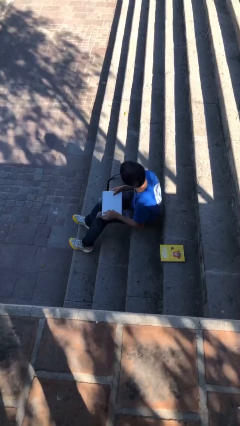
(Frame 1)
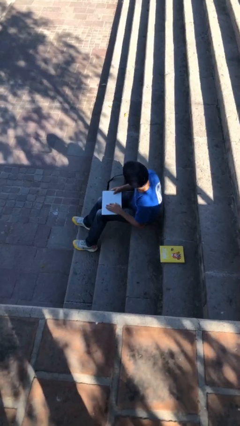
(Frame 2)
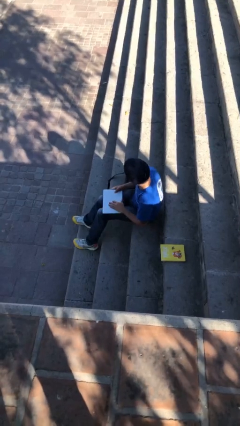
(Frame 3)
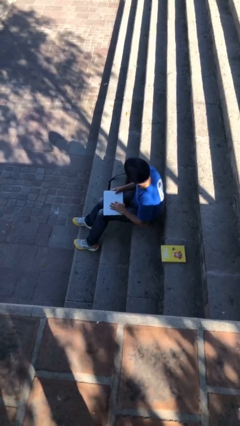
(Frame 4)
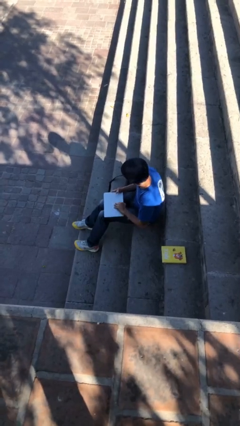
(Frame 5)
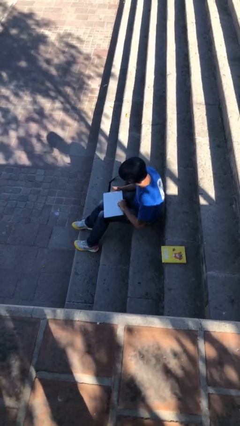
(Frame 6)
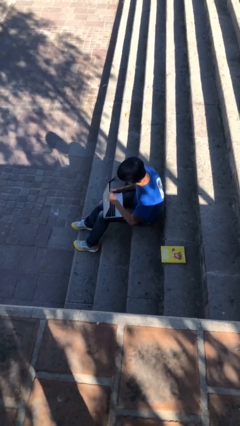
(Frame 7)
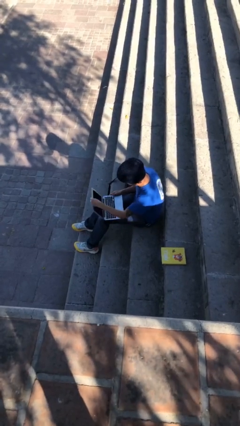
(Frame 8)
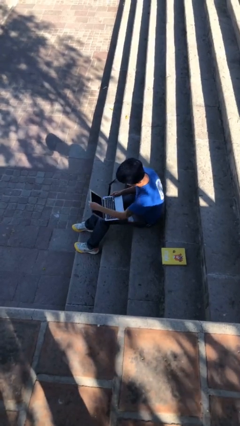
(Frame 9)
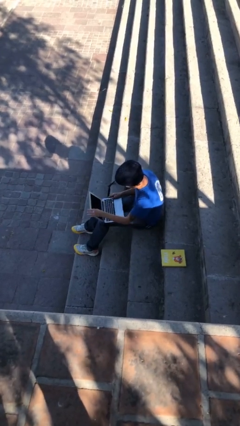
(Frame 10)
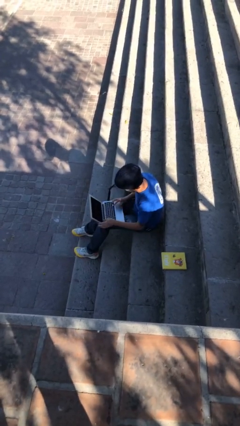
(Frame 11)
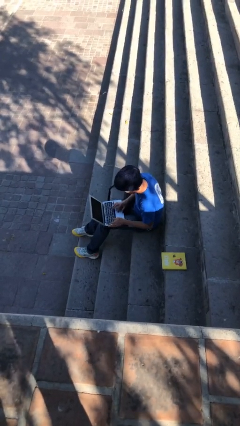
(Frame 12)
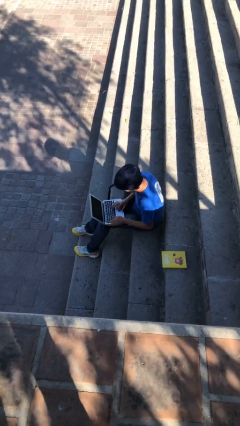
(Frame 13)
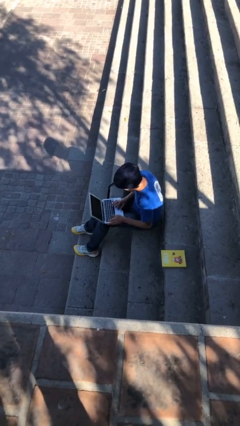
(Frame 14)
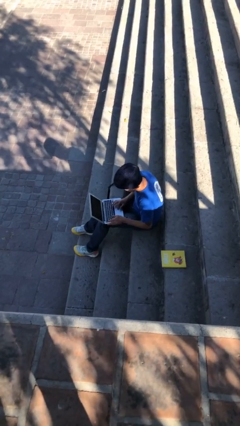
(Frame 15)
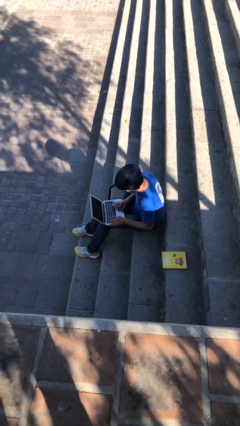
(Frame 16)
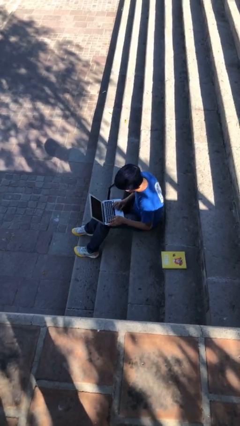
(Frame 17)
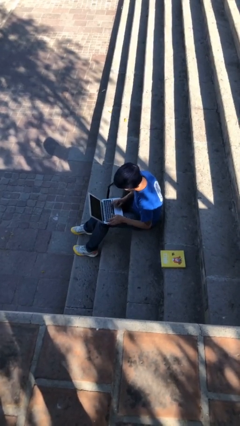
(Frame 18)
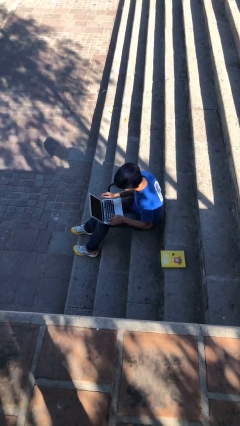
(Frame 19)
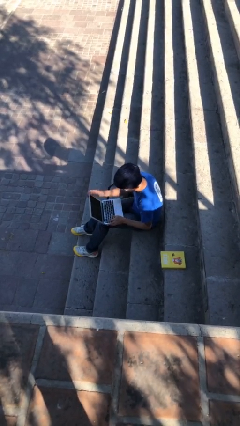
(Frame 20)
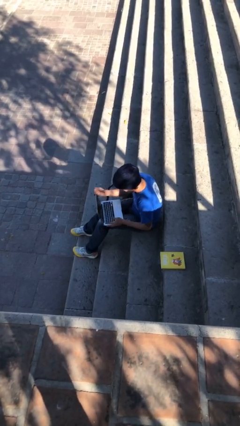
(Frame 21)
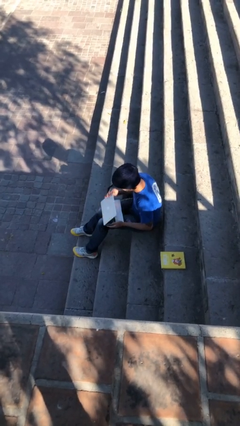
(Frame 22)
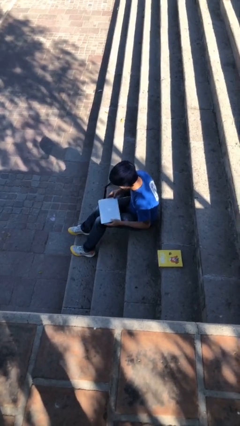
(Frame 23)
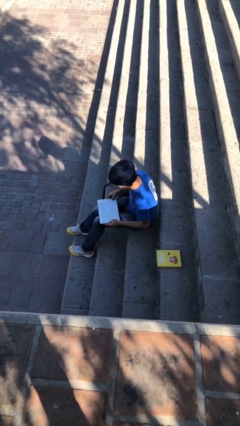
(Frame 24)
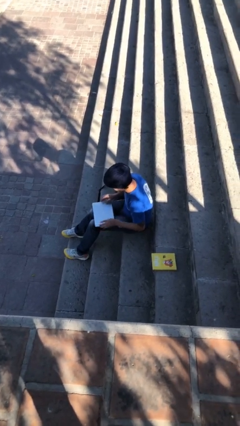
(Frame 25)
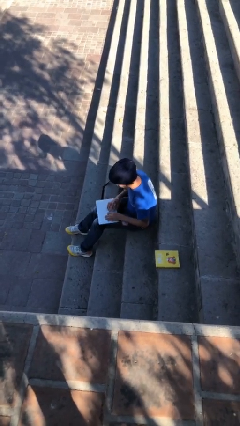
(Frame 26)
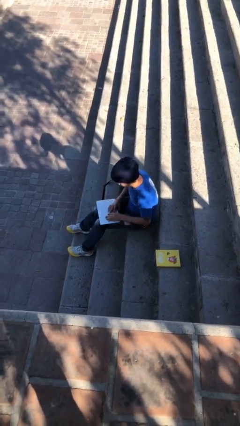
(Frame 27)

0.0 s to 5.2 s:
person interacts with laptop

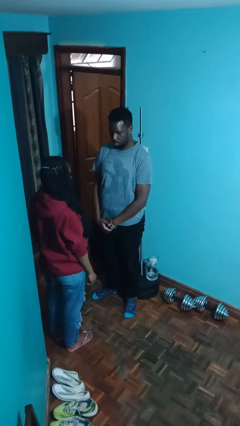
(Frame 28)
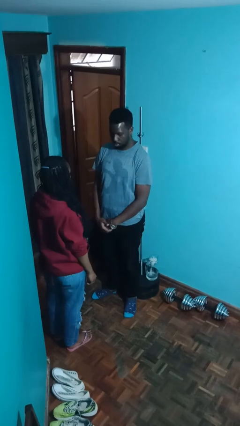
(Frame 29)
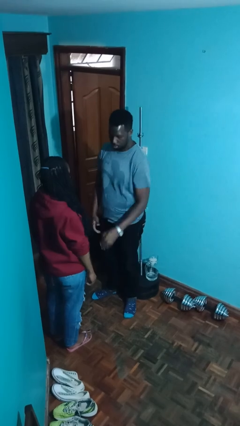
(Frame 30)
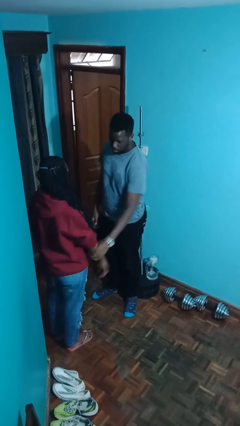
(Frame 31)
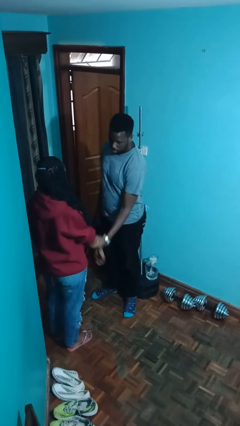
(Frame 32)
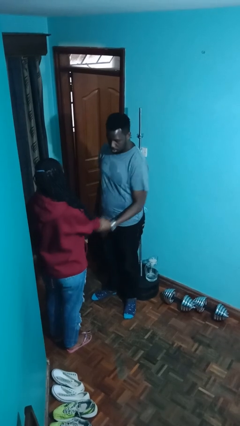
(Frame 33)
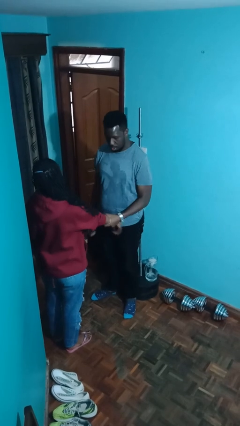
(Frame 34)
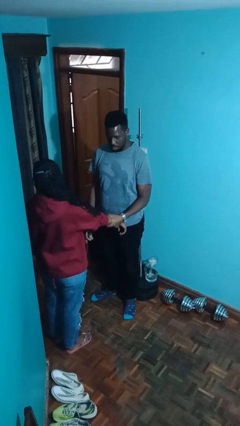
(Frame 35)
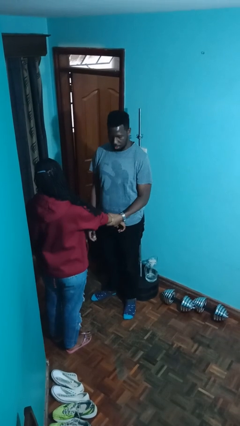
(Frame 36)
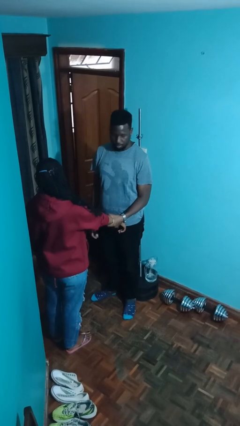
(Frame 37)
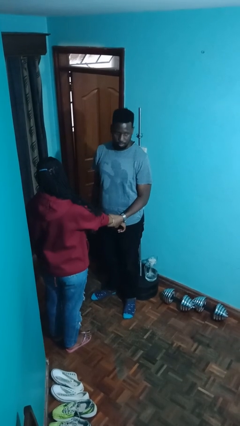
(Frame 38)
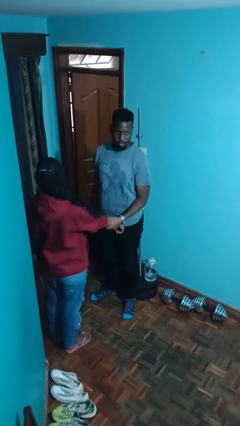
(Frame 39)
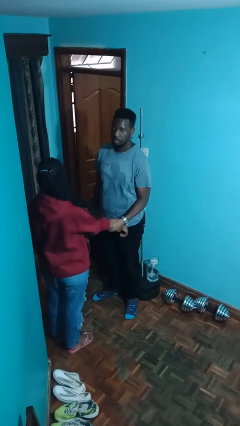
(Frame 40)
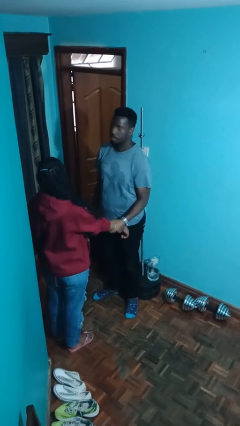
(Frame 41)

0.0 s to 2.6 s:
person grabs person by forearm

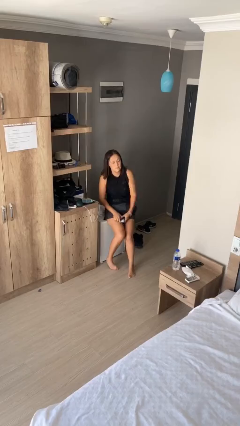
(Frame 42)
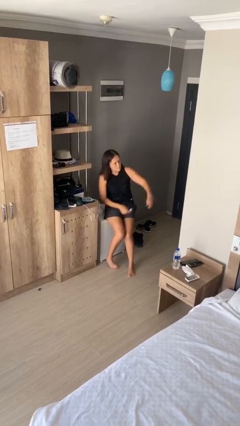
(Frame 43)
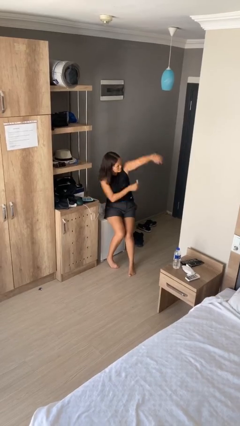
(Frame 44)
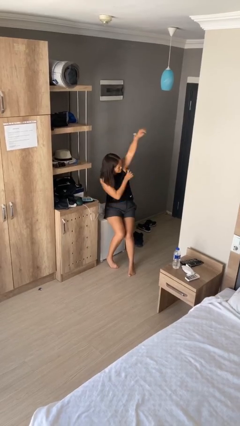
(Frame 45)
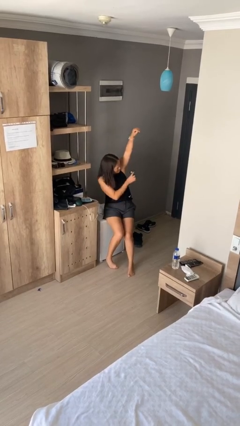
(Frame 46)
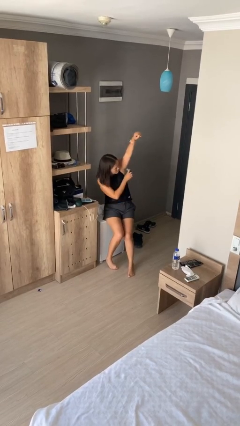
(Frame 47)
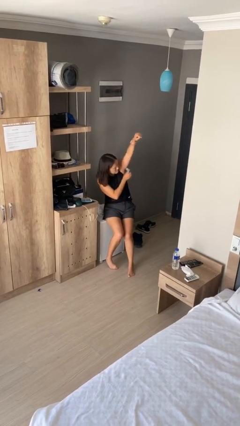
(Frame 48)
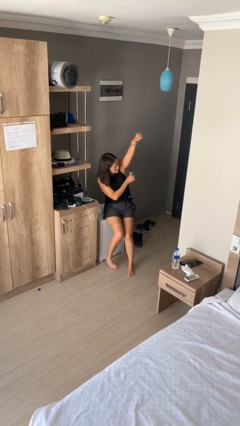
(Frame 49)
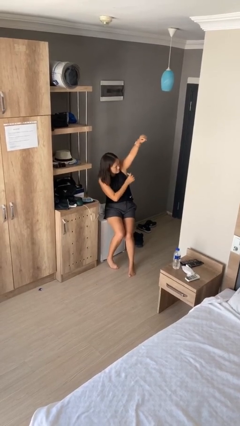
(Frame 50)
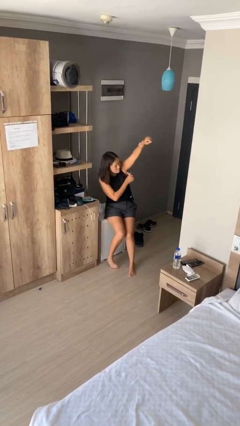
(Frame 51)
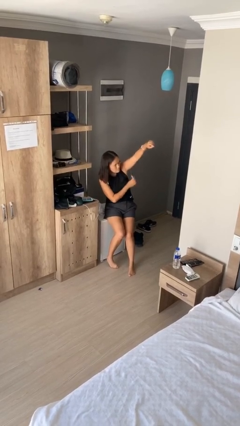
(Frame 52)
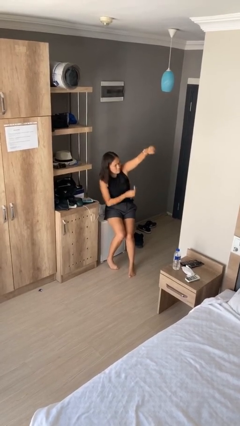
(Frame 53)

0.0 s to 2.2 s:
person applies deodorant

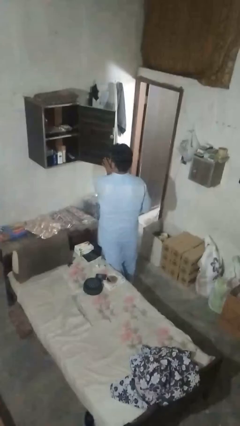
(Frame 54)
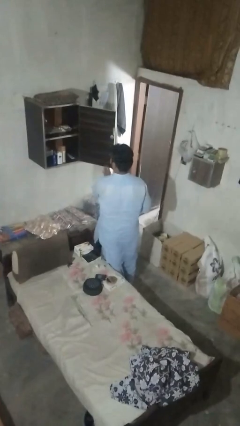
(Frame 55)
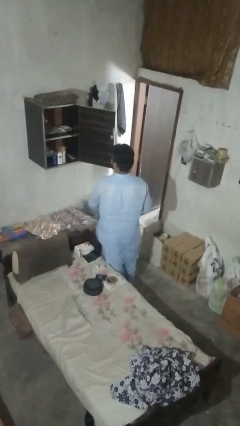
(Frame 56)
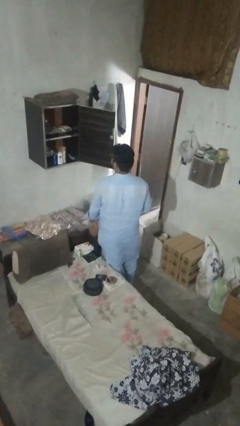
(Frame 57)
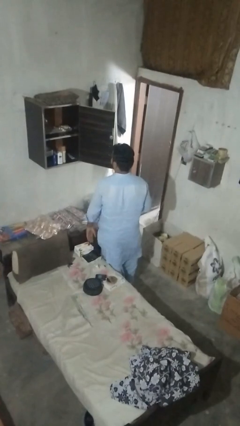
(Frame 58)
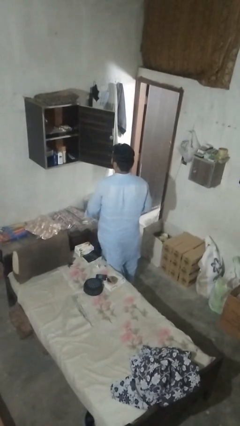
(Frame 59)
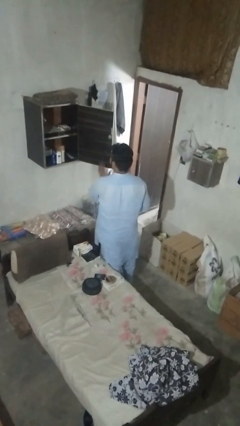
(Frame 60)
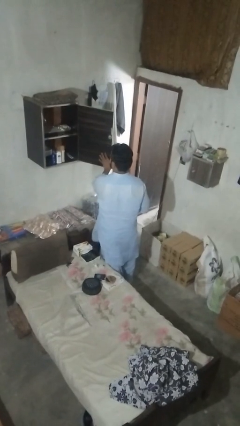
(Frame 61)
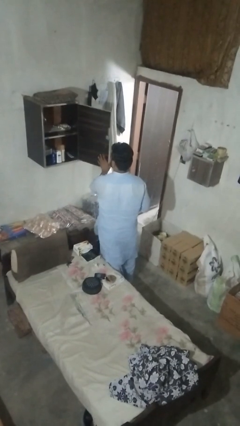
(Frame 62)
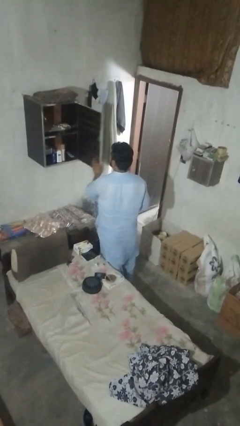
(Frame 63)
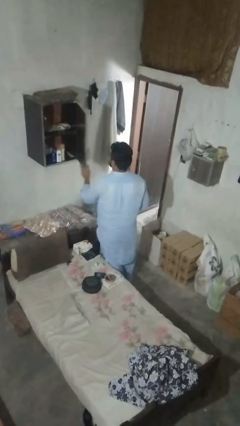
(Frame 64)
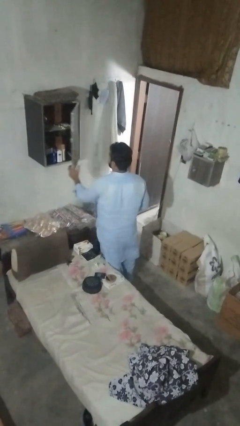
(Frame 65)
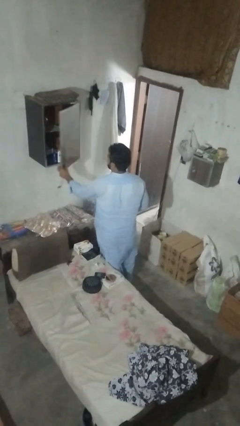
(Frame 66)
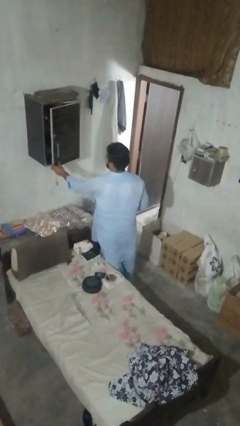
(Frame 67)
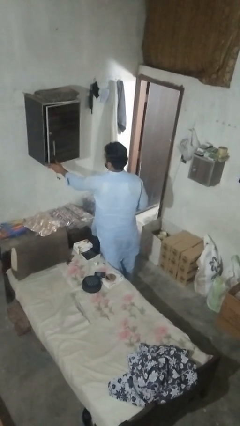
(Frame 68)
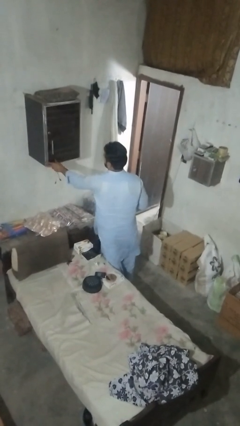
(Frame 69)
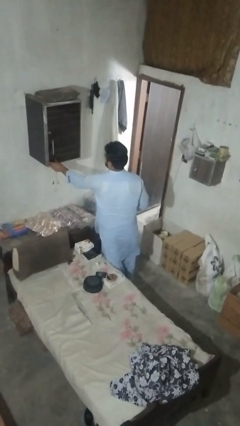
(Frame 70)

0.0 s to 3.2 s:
person closes dresser drawer

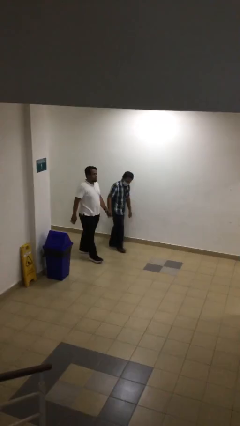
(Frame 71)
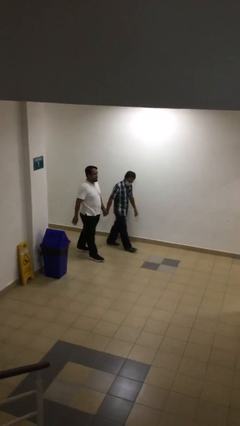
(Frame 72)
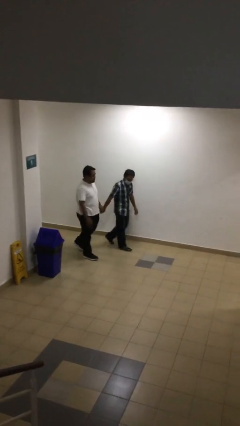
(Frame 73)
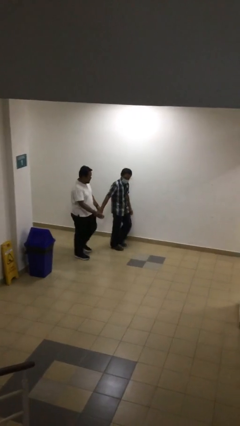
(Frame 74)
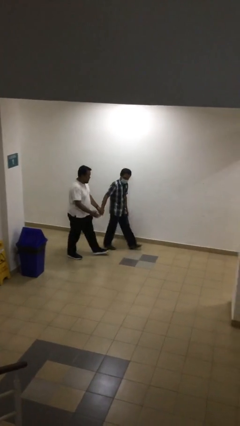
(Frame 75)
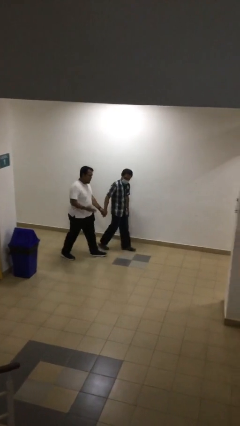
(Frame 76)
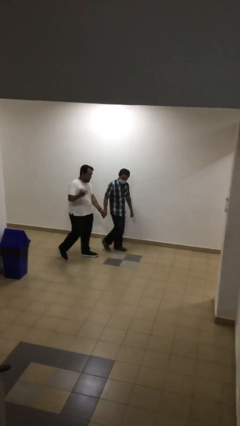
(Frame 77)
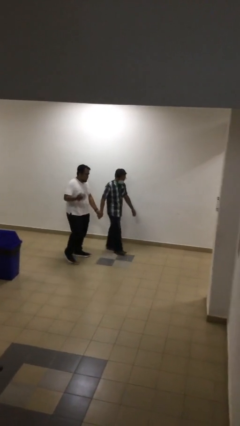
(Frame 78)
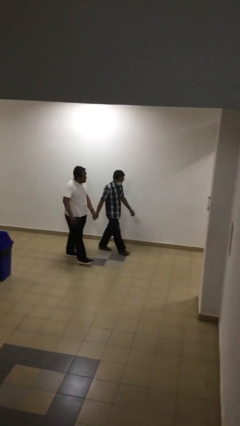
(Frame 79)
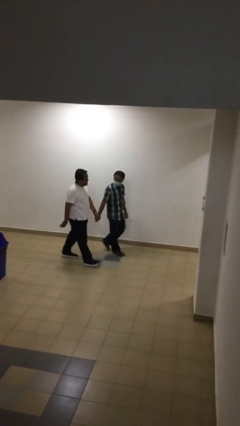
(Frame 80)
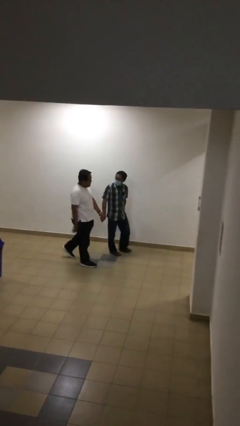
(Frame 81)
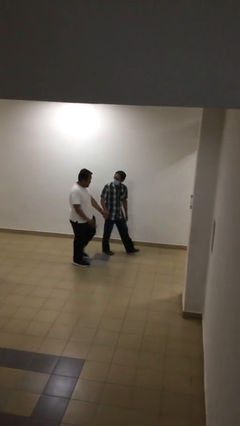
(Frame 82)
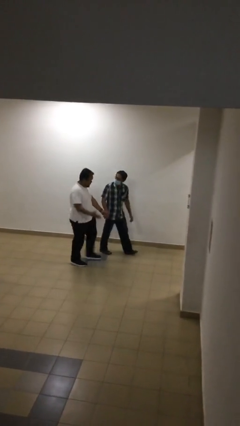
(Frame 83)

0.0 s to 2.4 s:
person holds hand

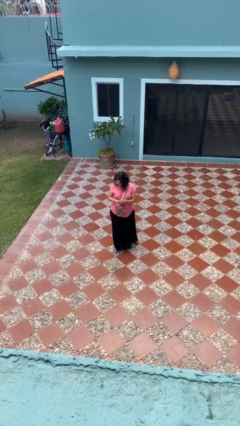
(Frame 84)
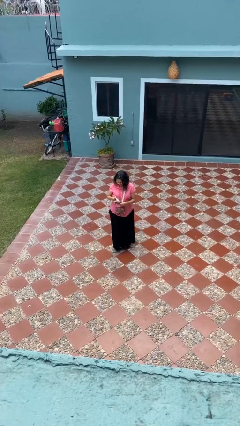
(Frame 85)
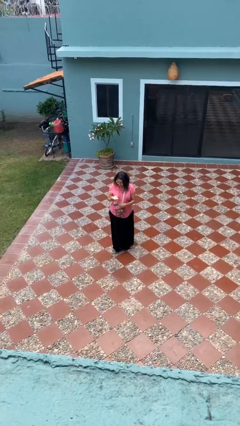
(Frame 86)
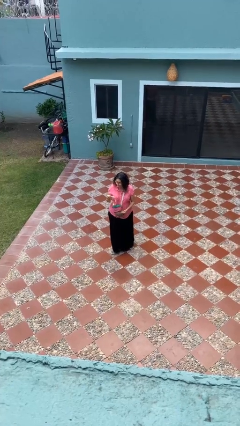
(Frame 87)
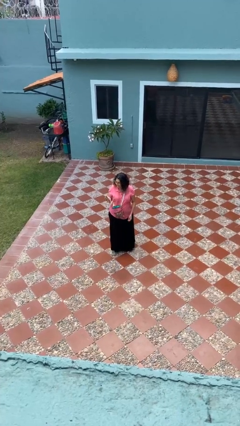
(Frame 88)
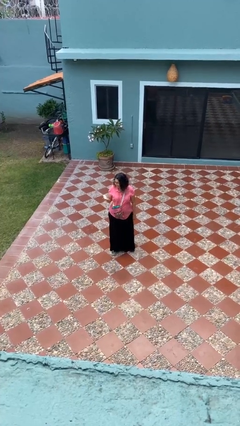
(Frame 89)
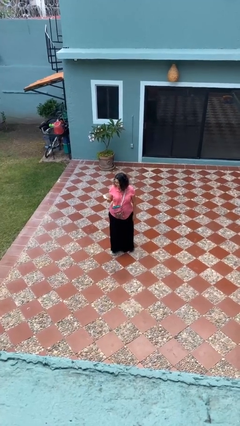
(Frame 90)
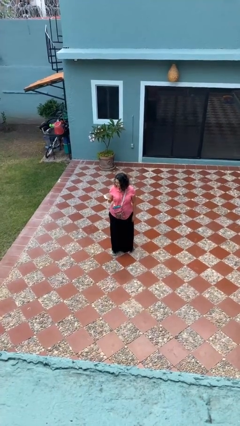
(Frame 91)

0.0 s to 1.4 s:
person takes object from purse
